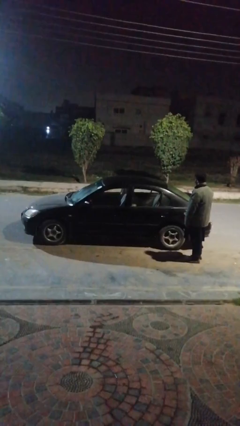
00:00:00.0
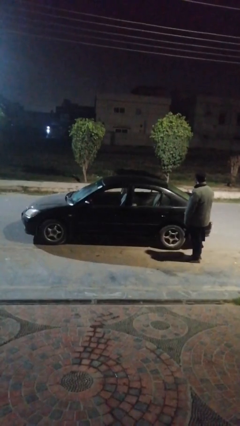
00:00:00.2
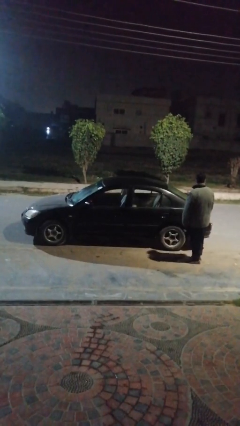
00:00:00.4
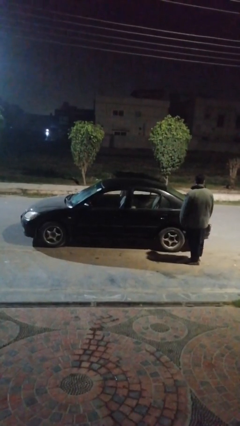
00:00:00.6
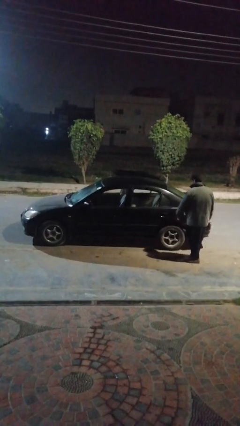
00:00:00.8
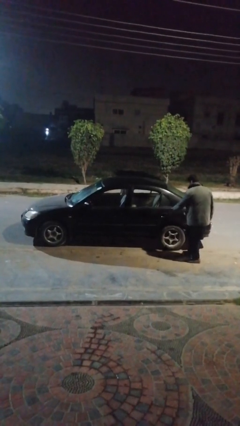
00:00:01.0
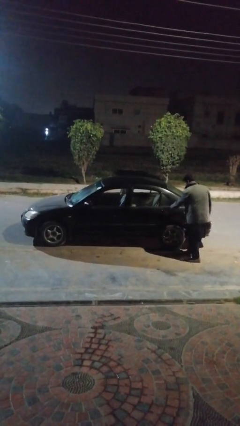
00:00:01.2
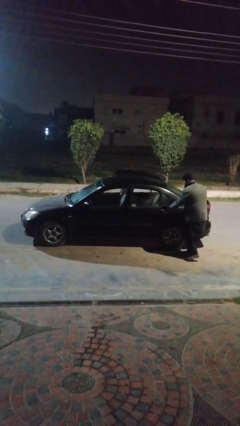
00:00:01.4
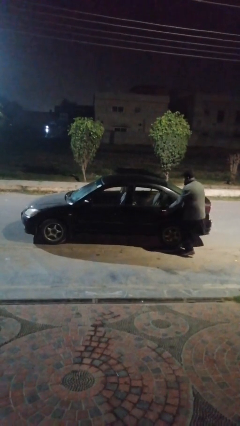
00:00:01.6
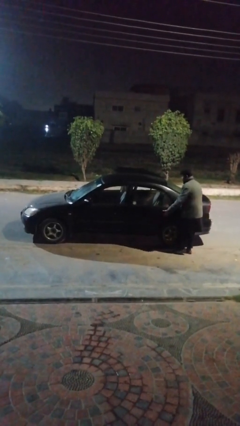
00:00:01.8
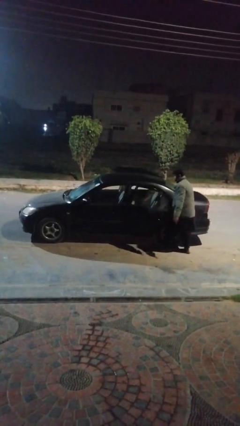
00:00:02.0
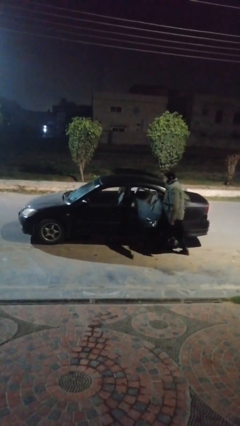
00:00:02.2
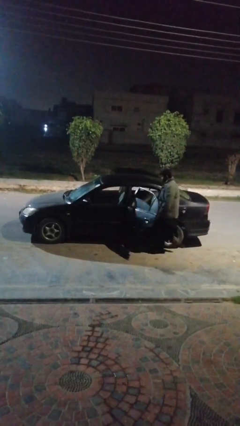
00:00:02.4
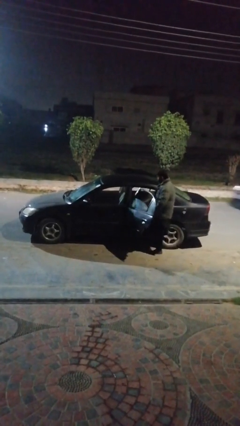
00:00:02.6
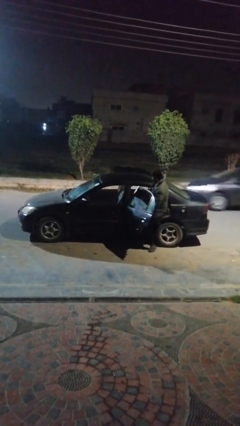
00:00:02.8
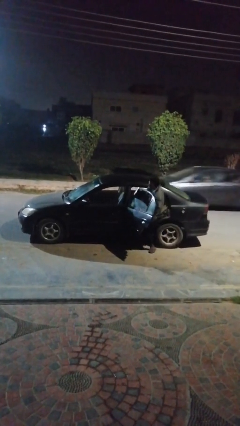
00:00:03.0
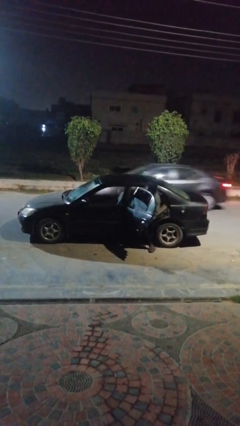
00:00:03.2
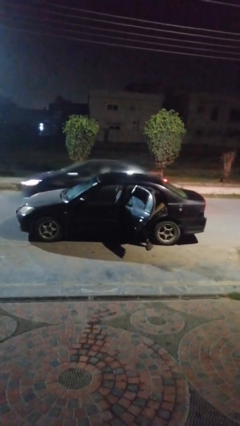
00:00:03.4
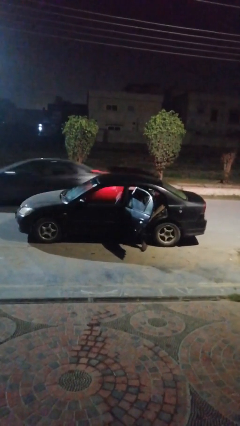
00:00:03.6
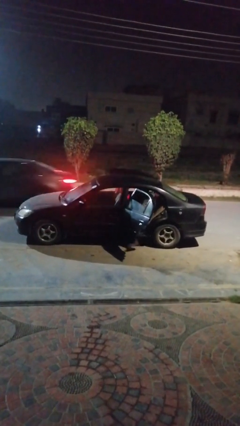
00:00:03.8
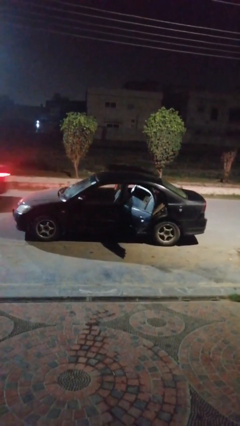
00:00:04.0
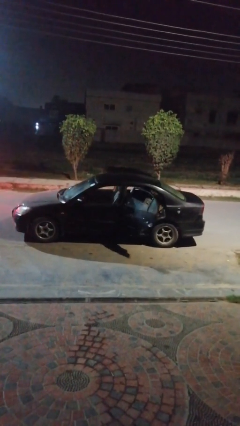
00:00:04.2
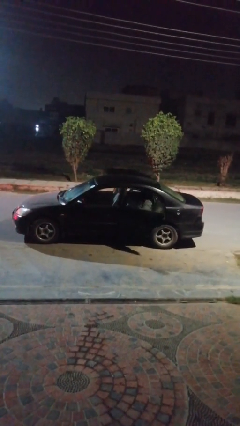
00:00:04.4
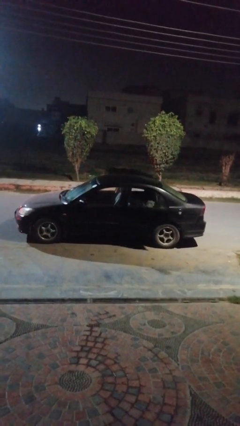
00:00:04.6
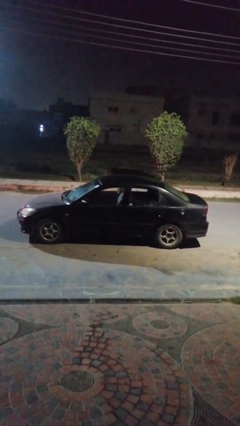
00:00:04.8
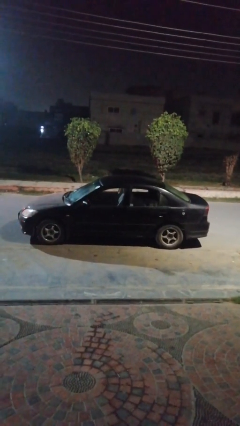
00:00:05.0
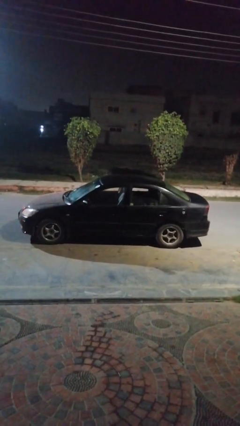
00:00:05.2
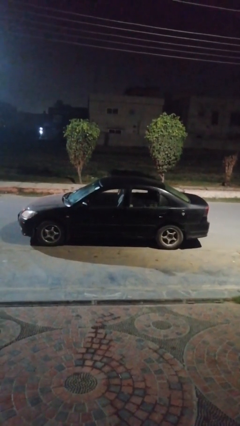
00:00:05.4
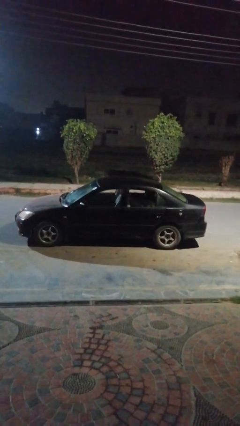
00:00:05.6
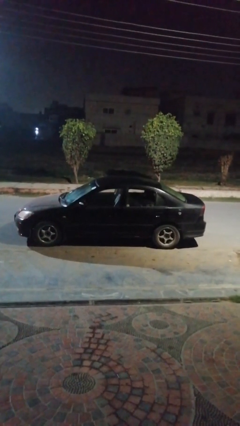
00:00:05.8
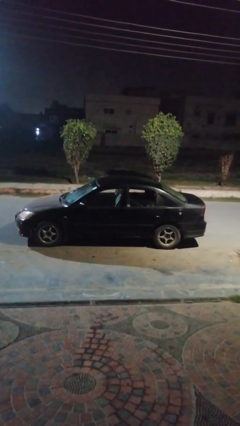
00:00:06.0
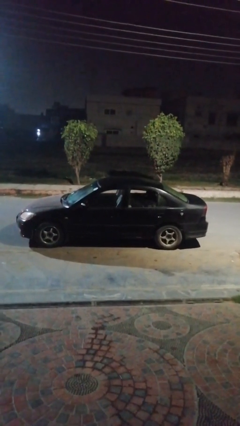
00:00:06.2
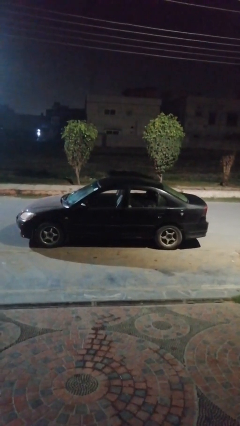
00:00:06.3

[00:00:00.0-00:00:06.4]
car picks up person

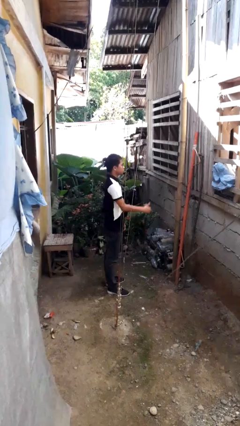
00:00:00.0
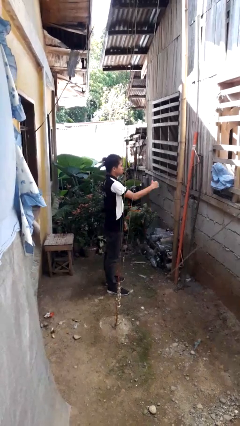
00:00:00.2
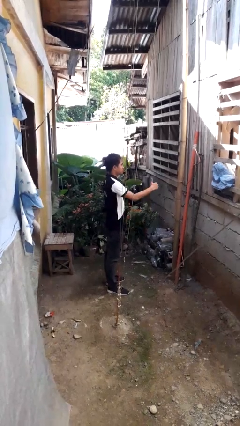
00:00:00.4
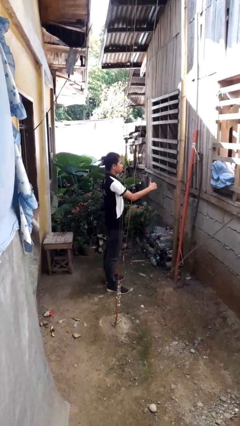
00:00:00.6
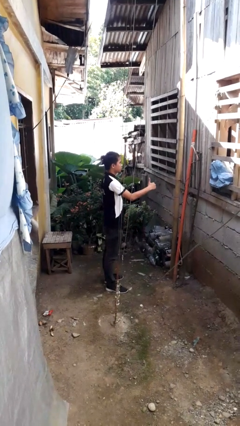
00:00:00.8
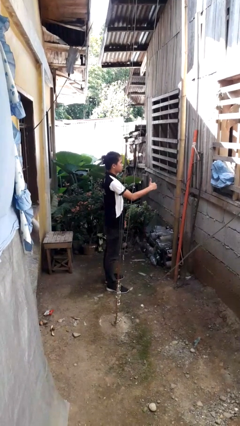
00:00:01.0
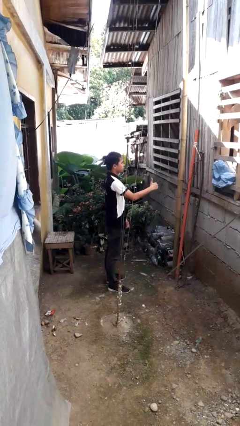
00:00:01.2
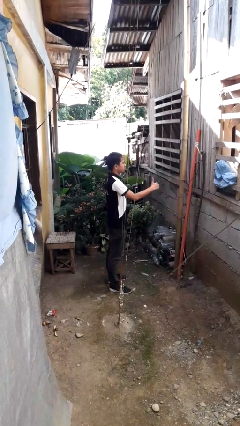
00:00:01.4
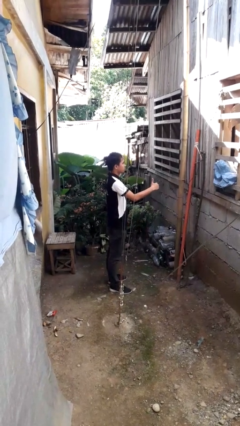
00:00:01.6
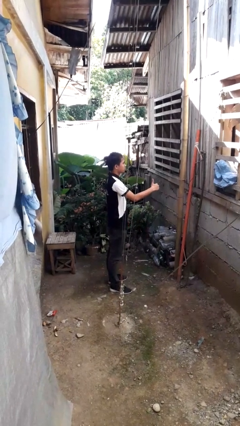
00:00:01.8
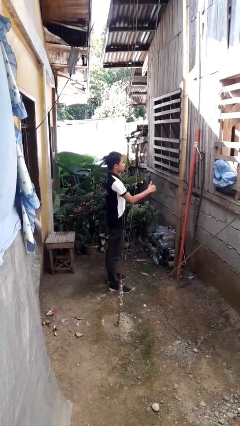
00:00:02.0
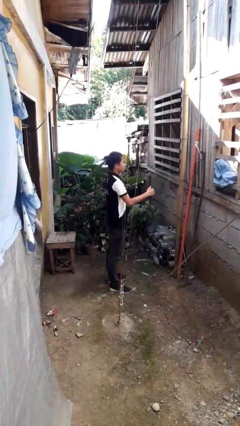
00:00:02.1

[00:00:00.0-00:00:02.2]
person gestures thumbs up

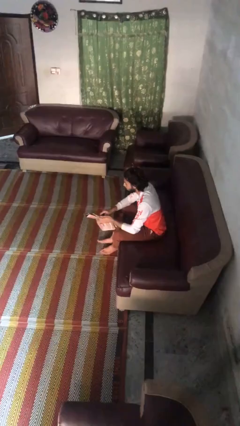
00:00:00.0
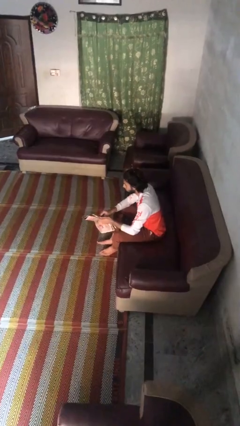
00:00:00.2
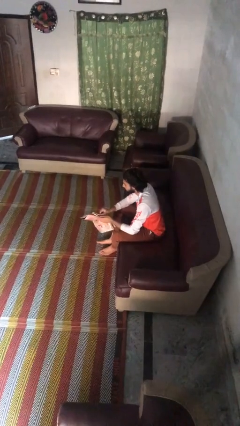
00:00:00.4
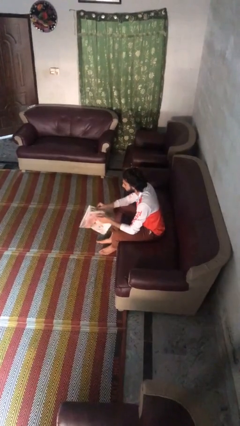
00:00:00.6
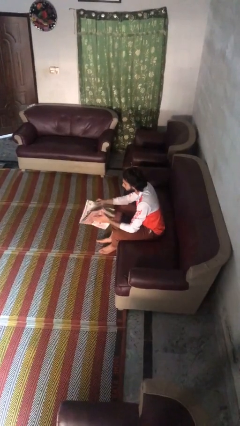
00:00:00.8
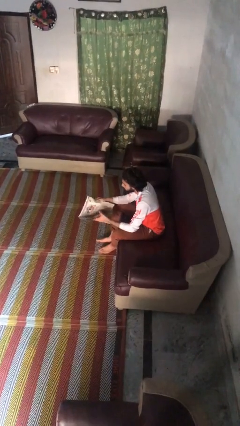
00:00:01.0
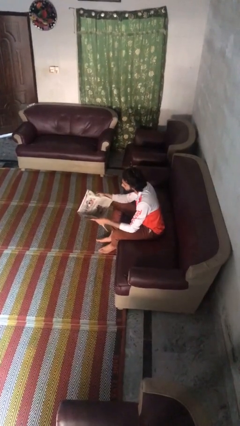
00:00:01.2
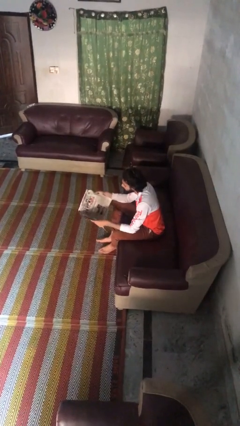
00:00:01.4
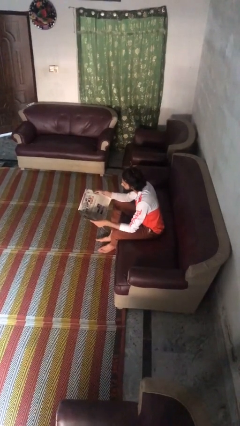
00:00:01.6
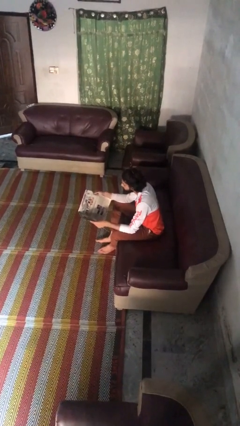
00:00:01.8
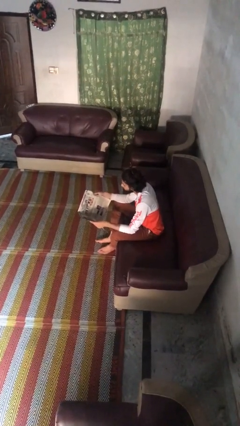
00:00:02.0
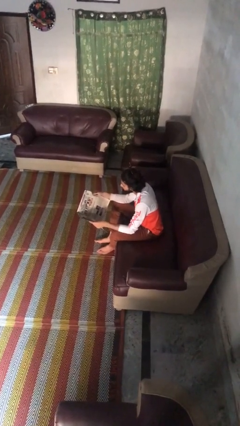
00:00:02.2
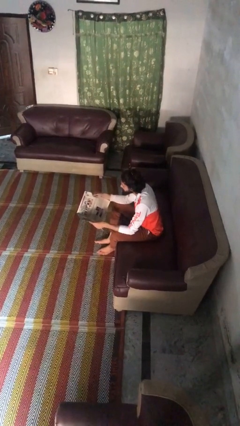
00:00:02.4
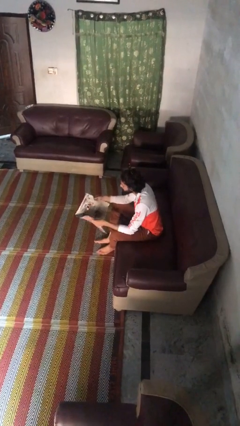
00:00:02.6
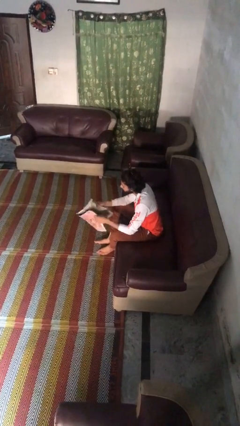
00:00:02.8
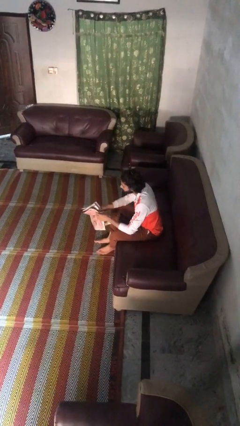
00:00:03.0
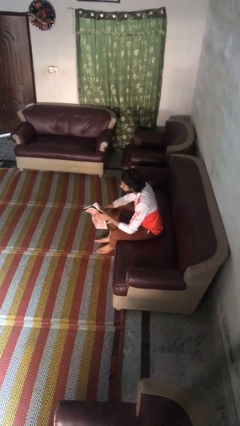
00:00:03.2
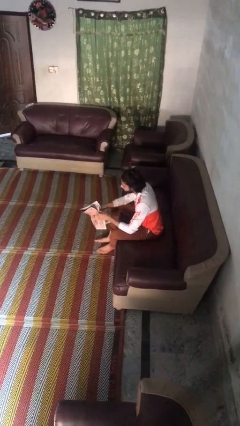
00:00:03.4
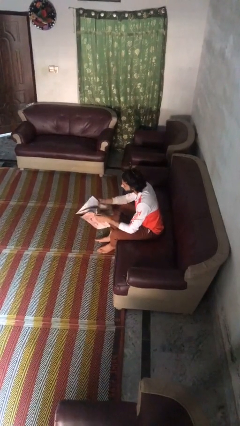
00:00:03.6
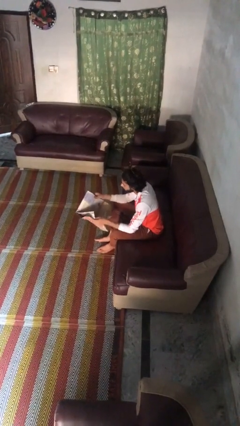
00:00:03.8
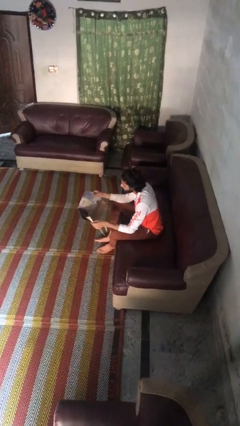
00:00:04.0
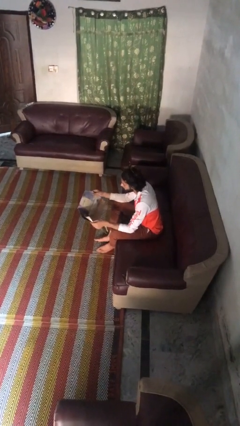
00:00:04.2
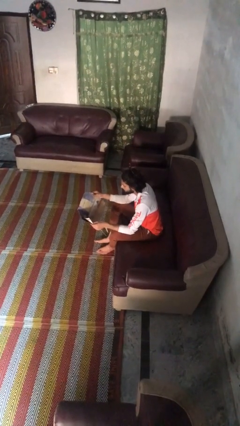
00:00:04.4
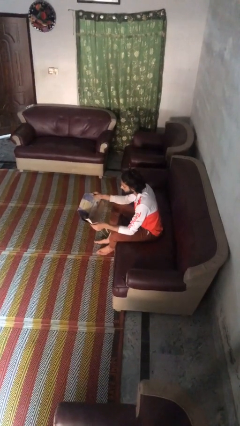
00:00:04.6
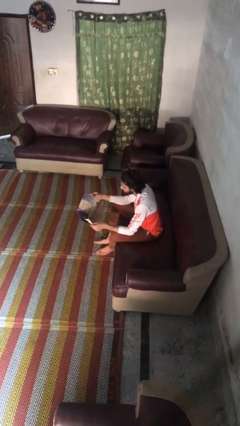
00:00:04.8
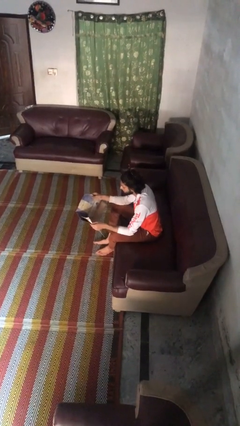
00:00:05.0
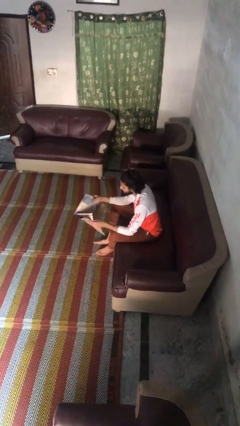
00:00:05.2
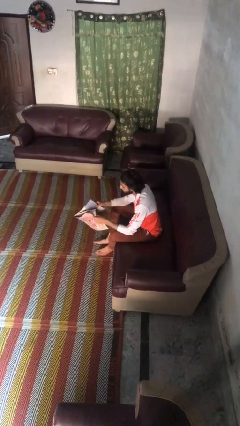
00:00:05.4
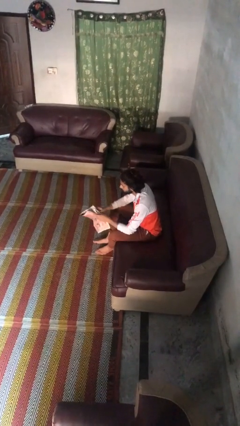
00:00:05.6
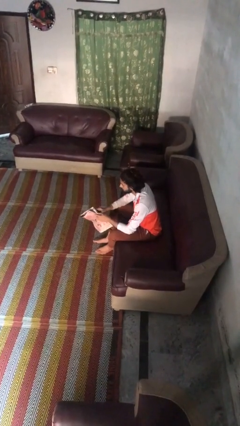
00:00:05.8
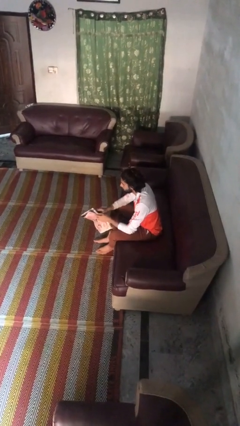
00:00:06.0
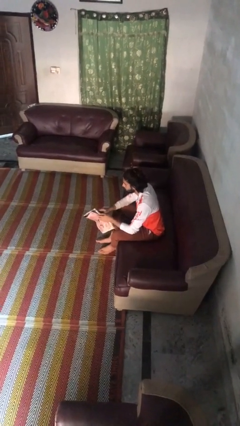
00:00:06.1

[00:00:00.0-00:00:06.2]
person reads magazine

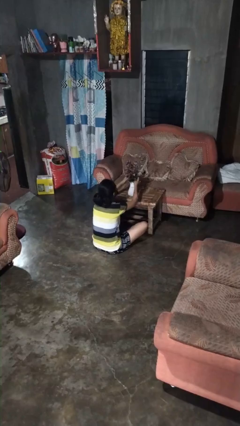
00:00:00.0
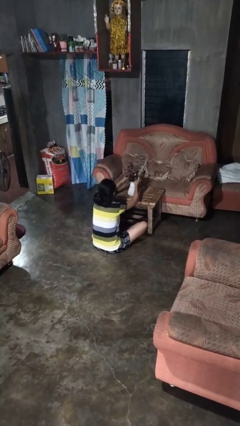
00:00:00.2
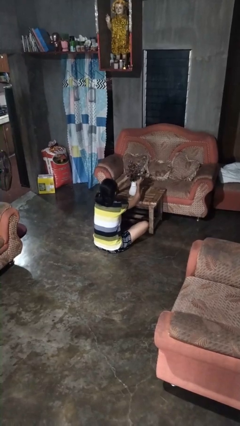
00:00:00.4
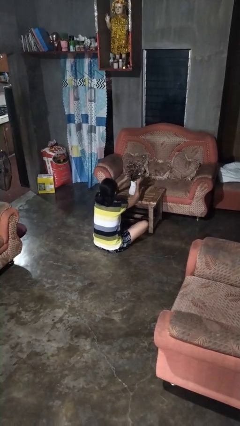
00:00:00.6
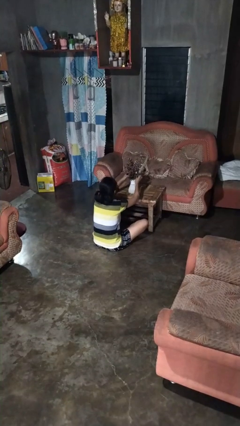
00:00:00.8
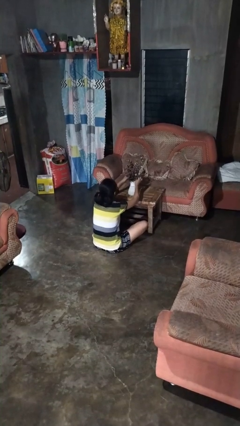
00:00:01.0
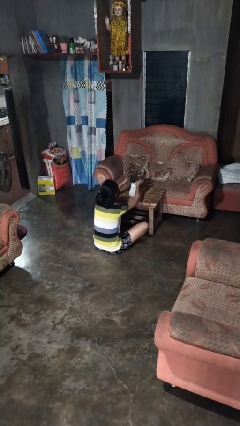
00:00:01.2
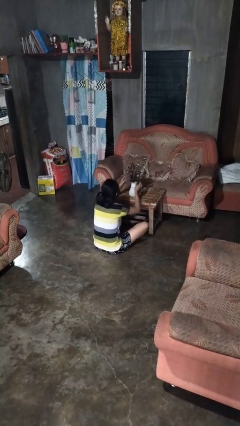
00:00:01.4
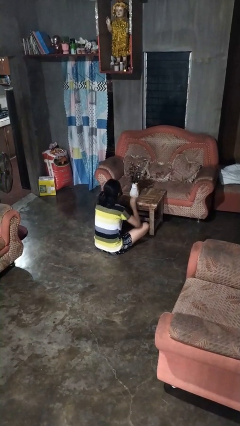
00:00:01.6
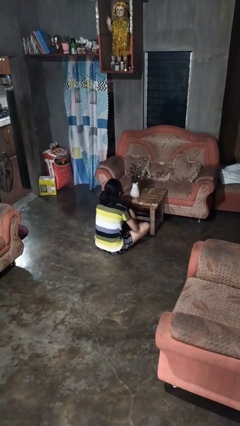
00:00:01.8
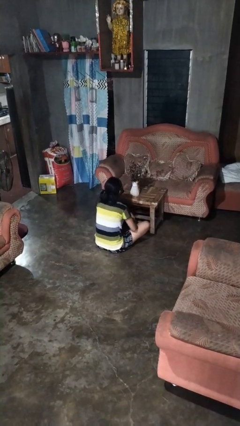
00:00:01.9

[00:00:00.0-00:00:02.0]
person arranges flowers in vase

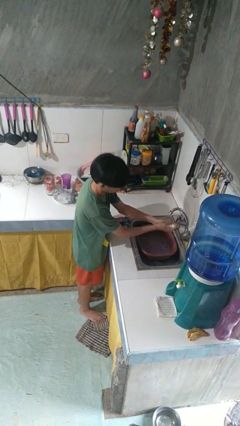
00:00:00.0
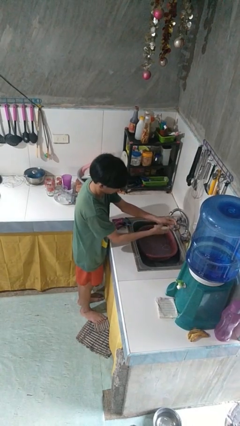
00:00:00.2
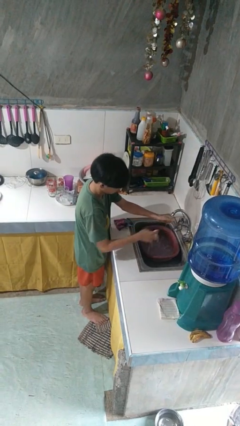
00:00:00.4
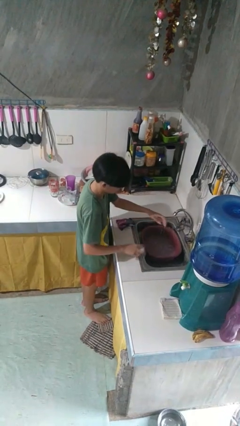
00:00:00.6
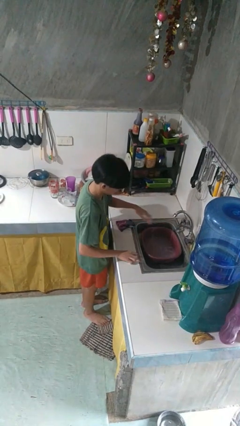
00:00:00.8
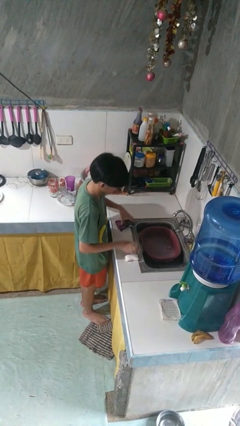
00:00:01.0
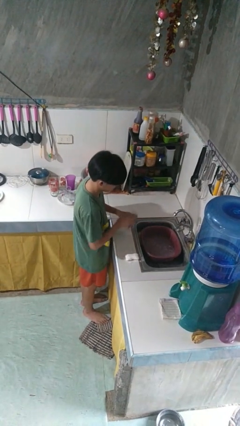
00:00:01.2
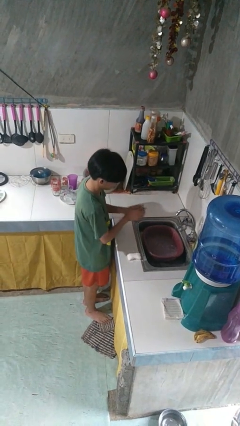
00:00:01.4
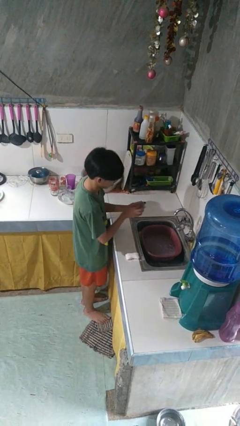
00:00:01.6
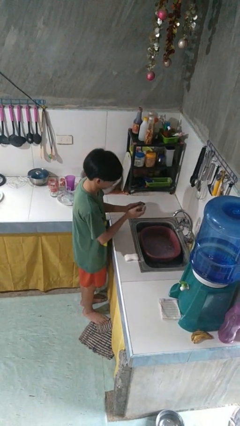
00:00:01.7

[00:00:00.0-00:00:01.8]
person dries hands with towel
